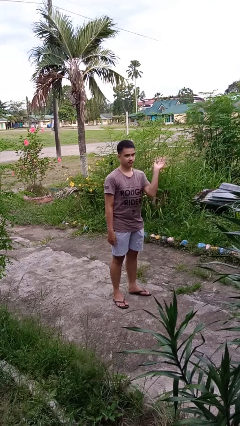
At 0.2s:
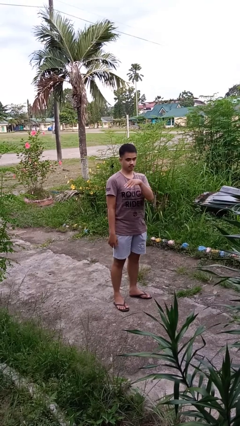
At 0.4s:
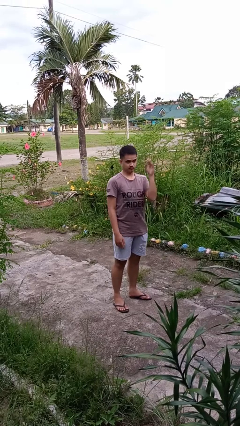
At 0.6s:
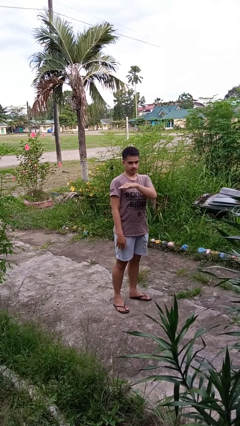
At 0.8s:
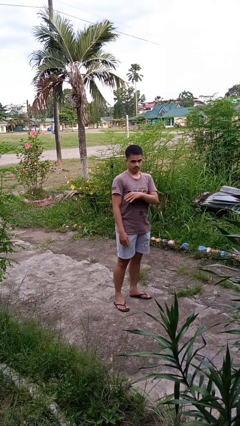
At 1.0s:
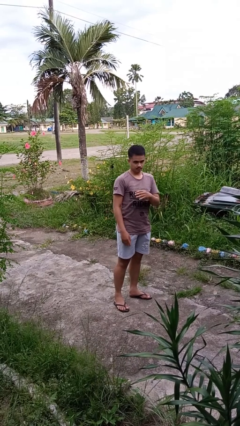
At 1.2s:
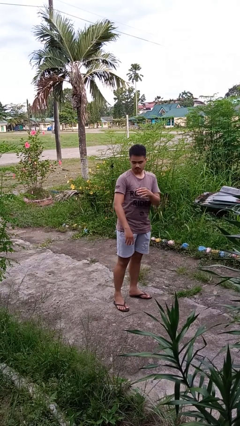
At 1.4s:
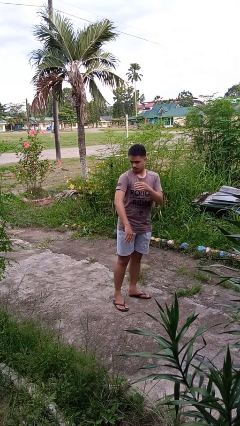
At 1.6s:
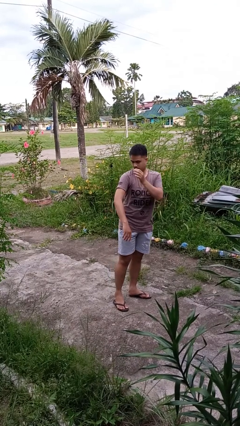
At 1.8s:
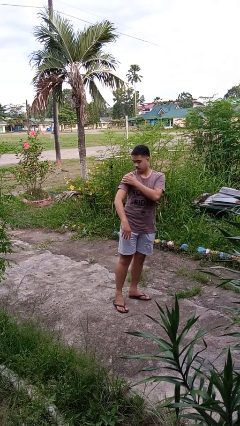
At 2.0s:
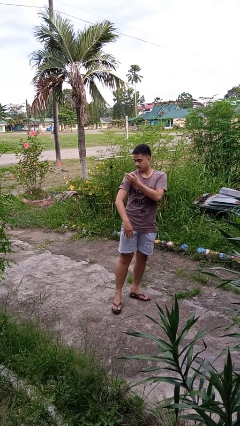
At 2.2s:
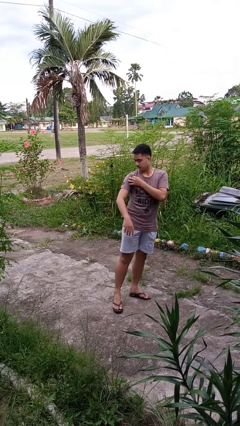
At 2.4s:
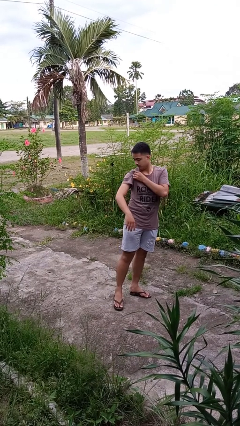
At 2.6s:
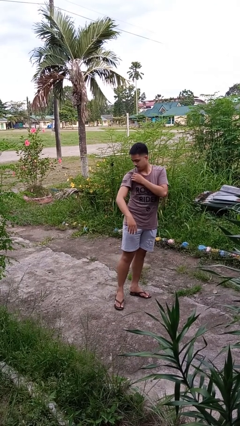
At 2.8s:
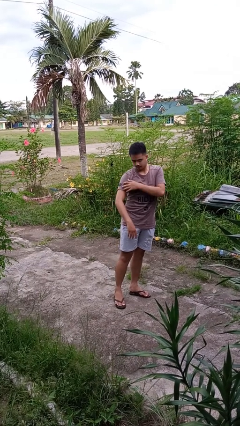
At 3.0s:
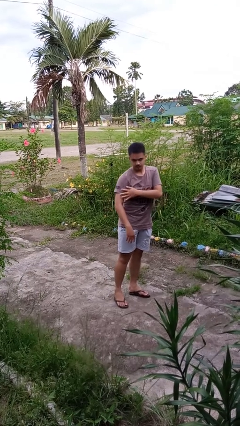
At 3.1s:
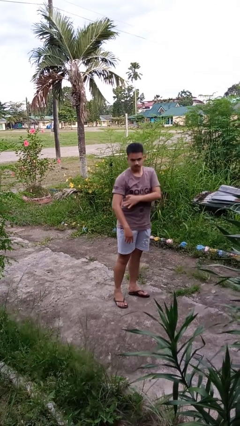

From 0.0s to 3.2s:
person swats bug

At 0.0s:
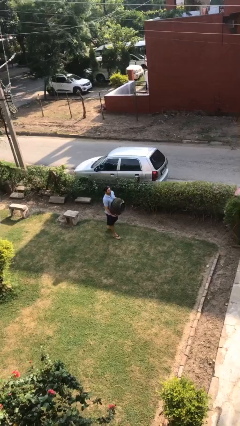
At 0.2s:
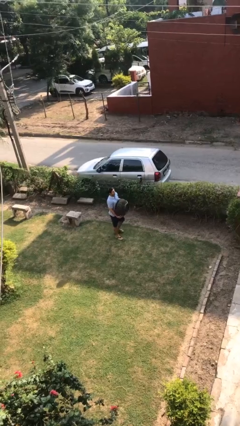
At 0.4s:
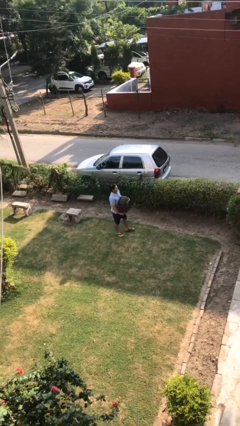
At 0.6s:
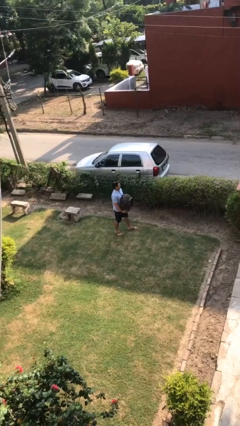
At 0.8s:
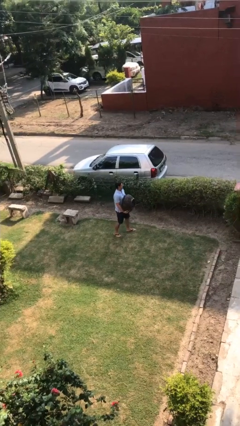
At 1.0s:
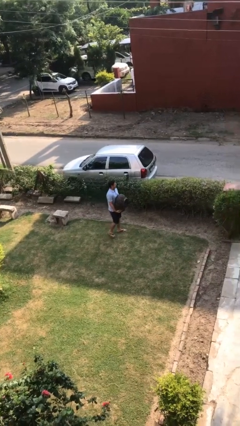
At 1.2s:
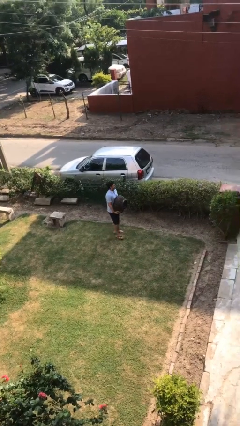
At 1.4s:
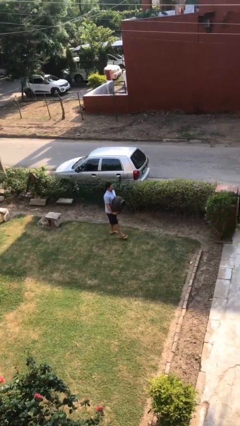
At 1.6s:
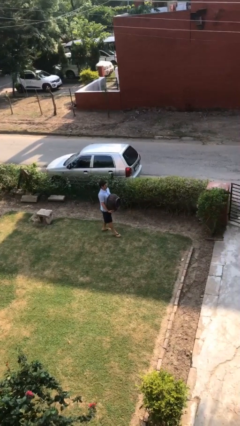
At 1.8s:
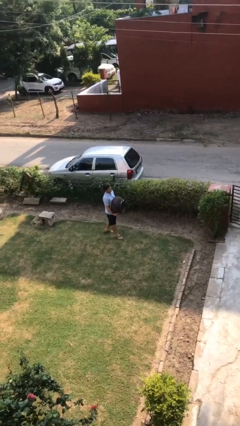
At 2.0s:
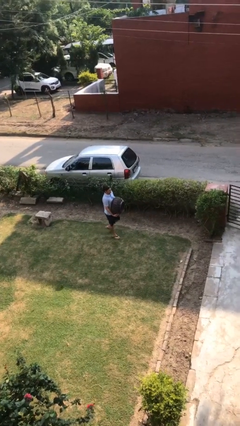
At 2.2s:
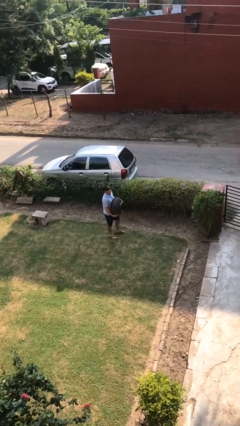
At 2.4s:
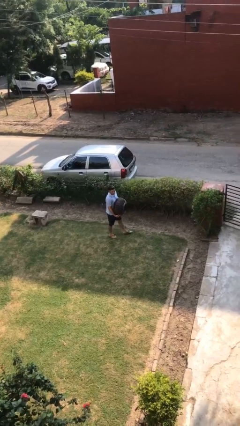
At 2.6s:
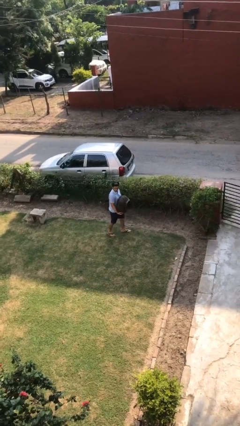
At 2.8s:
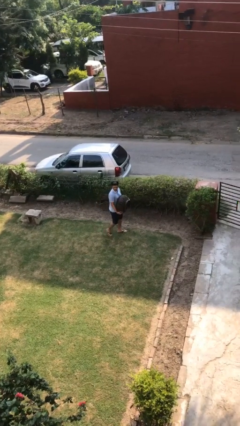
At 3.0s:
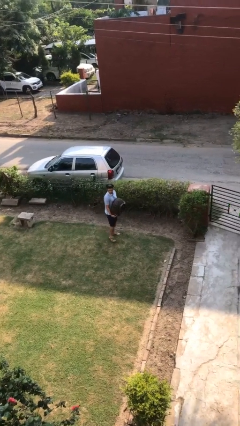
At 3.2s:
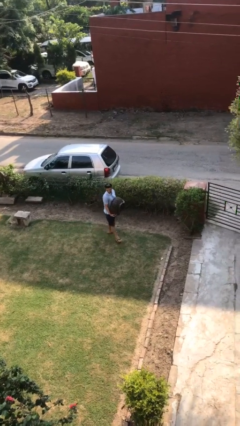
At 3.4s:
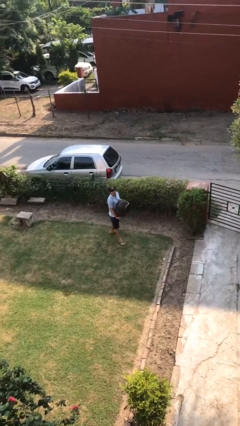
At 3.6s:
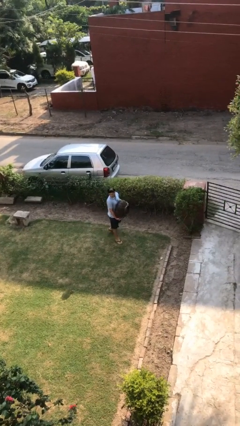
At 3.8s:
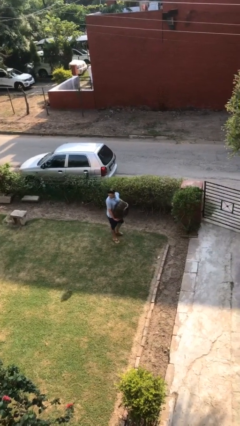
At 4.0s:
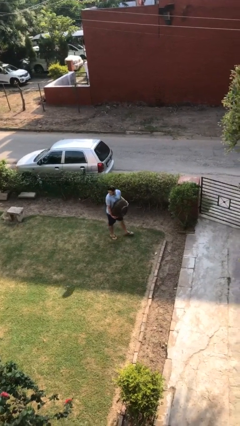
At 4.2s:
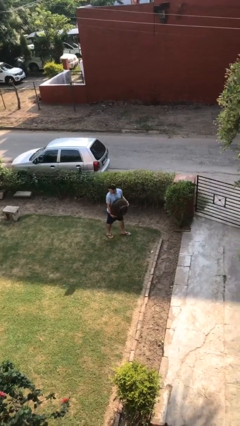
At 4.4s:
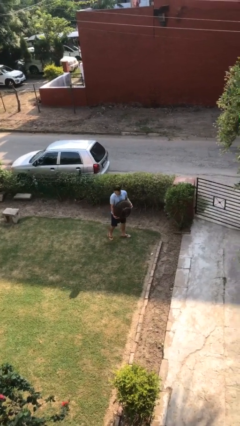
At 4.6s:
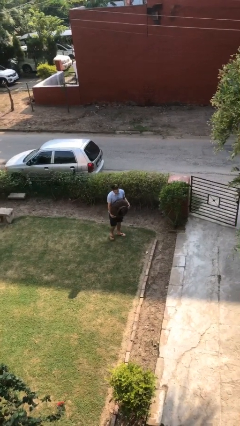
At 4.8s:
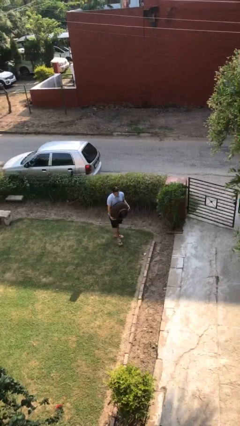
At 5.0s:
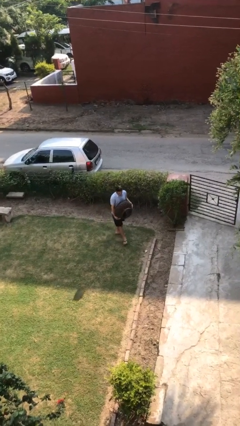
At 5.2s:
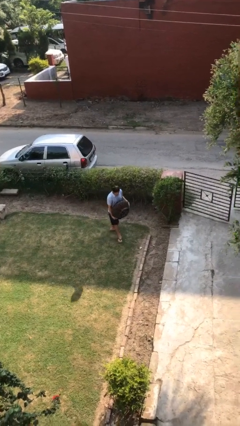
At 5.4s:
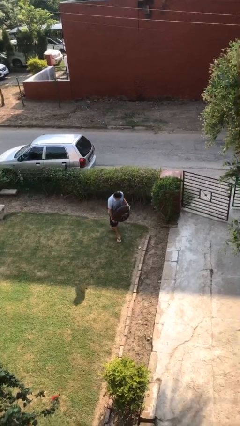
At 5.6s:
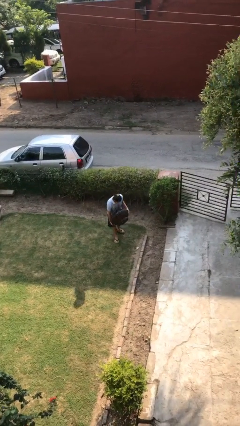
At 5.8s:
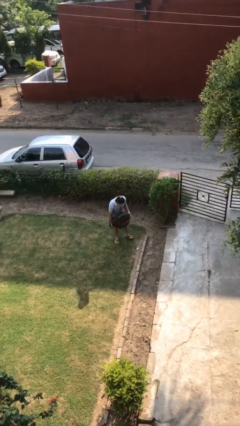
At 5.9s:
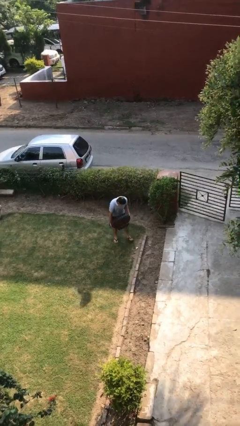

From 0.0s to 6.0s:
person carries heavy object

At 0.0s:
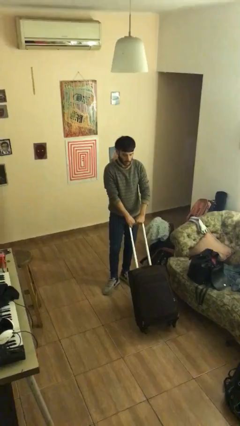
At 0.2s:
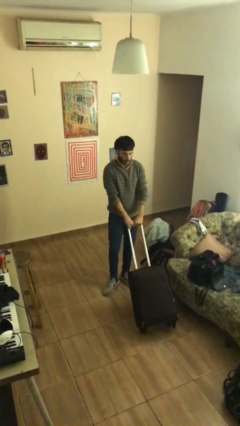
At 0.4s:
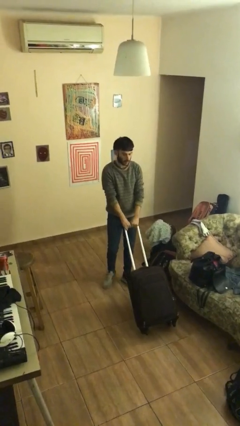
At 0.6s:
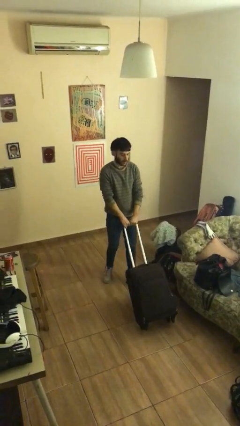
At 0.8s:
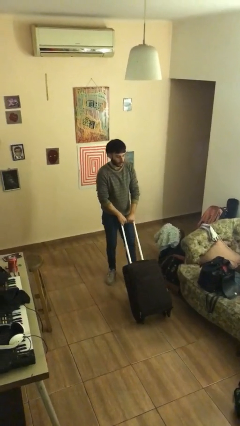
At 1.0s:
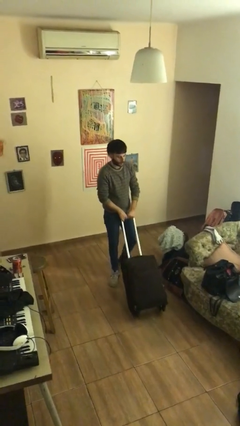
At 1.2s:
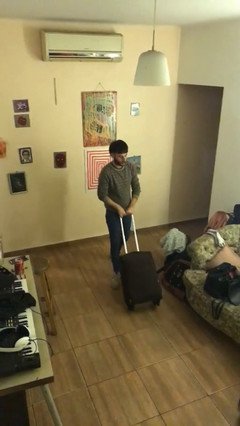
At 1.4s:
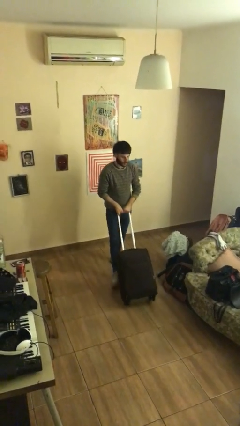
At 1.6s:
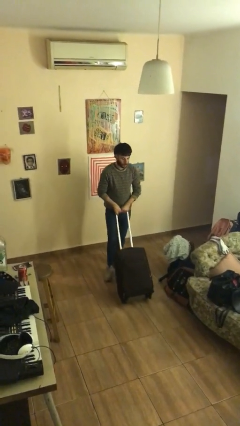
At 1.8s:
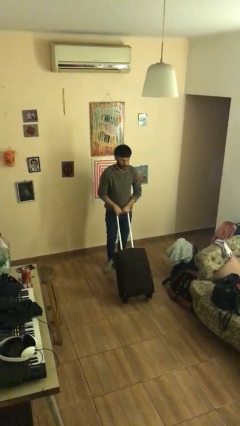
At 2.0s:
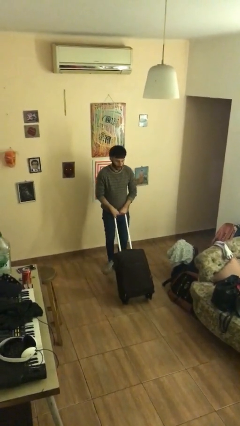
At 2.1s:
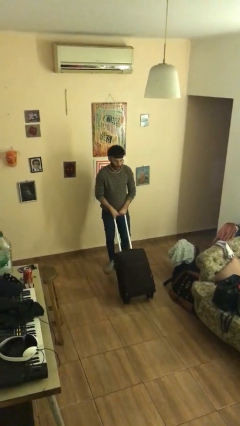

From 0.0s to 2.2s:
person pulls wheeled cart

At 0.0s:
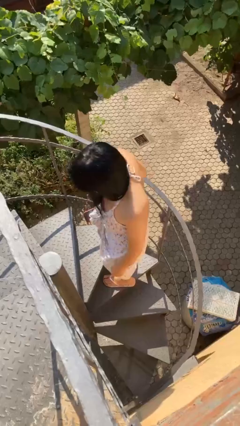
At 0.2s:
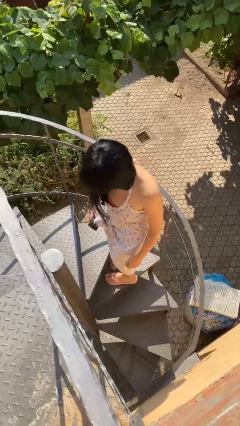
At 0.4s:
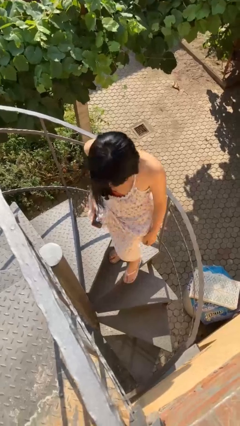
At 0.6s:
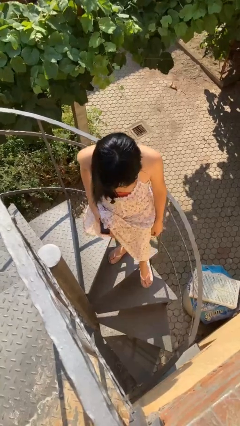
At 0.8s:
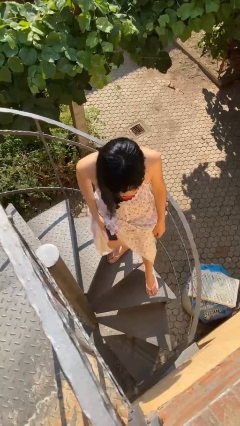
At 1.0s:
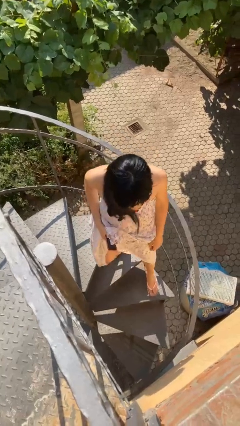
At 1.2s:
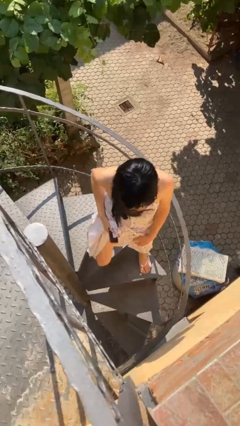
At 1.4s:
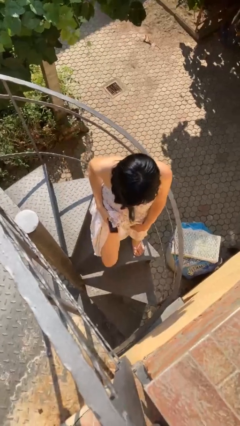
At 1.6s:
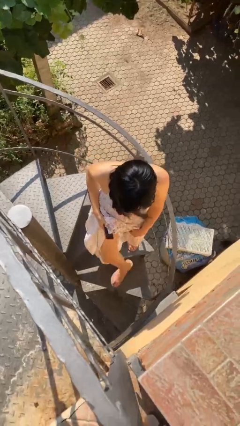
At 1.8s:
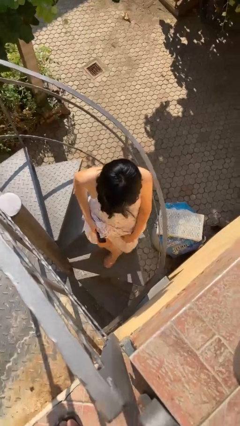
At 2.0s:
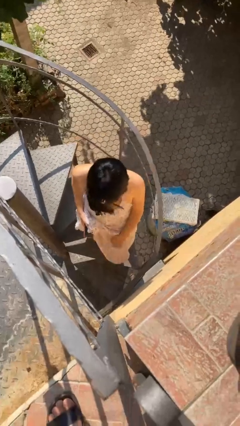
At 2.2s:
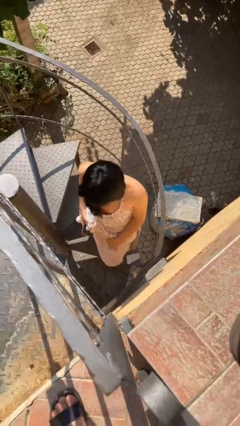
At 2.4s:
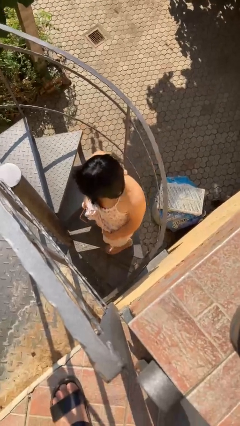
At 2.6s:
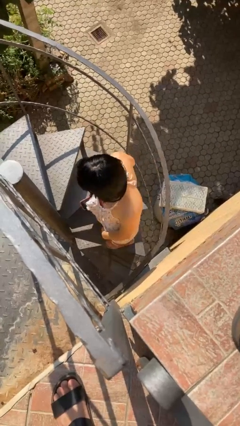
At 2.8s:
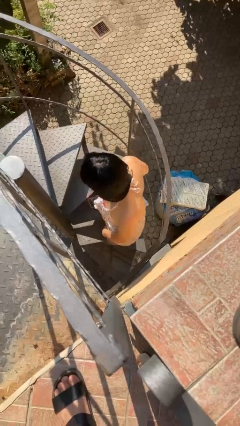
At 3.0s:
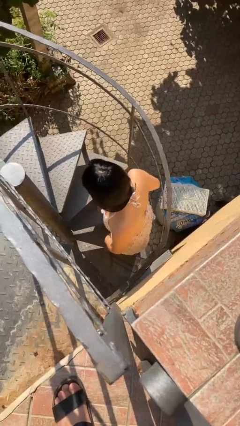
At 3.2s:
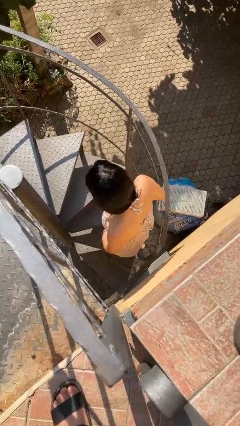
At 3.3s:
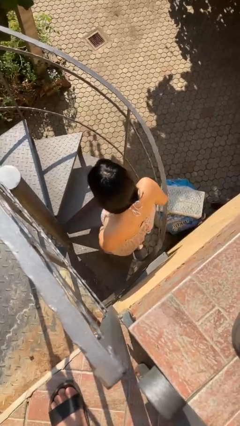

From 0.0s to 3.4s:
person climbs down stairs

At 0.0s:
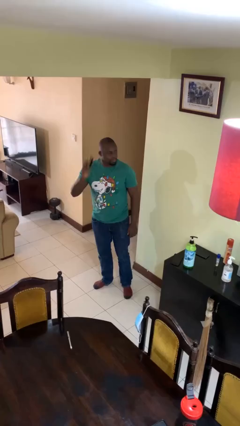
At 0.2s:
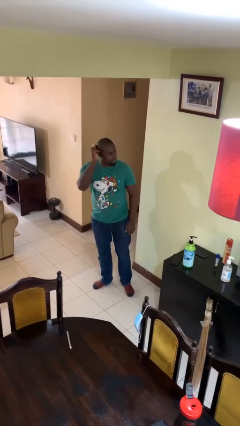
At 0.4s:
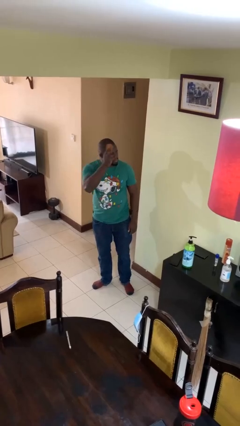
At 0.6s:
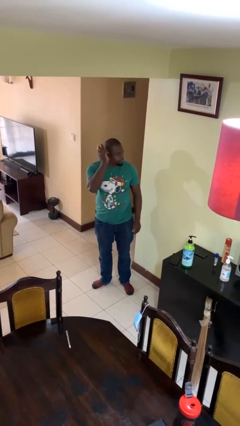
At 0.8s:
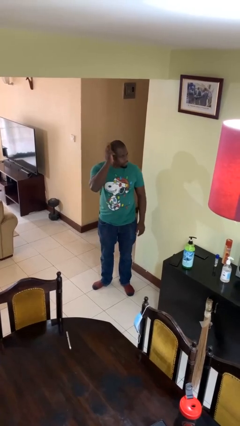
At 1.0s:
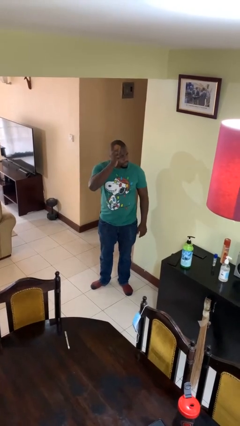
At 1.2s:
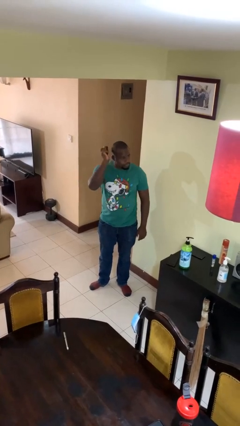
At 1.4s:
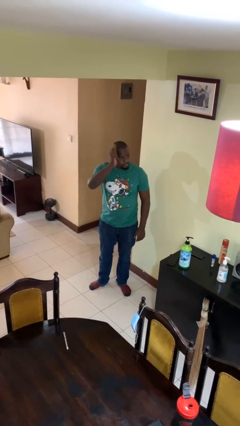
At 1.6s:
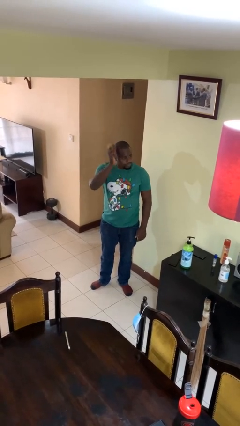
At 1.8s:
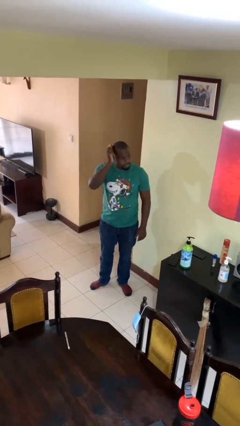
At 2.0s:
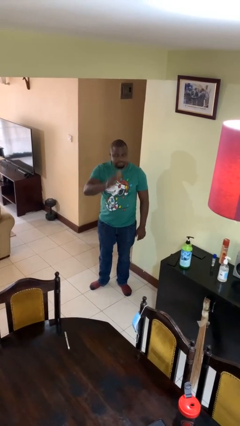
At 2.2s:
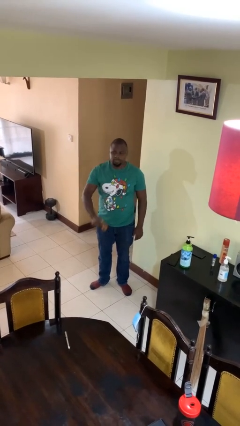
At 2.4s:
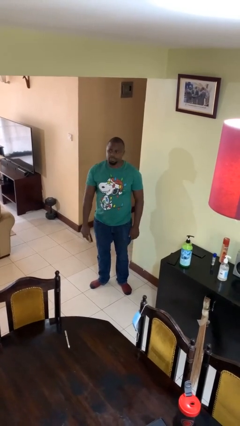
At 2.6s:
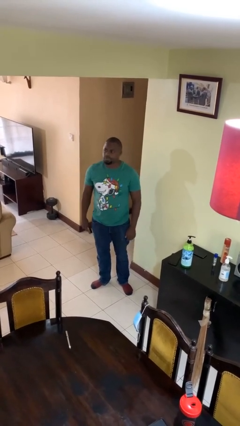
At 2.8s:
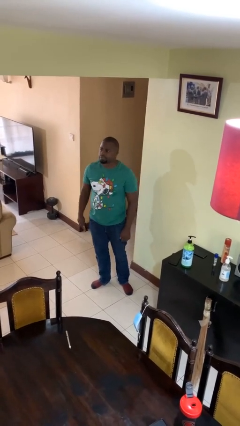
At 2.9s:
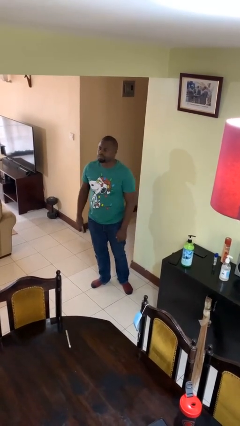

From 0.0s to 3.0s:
person brushes hair
